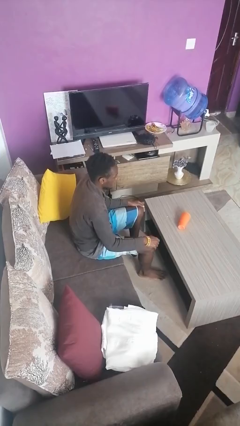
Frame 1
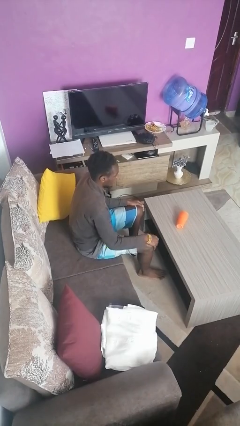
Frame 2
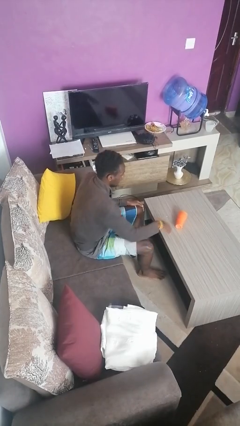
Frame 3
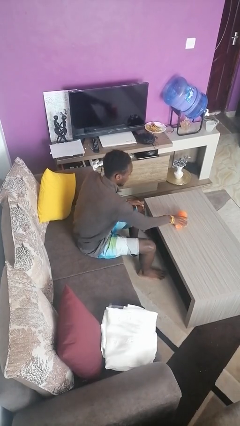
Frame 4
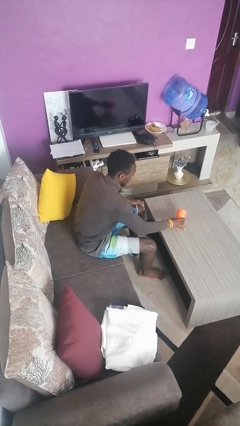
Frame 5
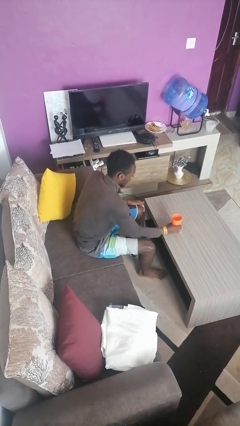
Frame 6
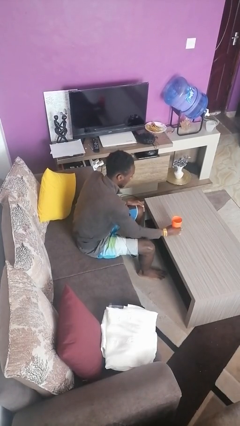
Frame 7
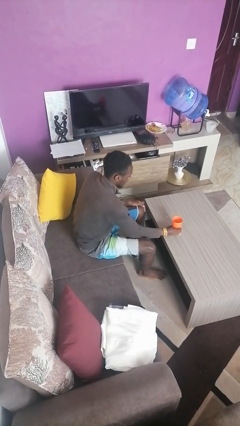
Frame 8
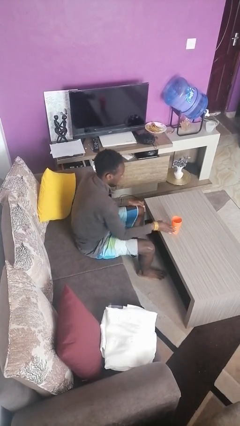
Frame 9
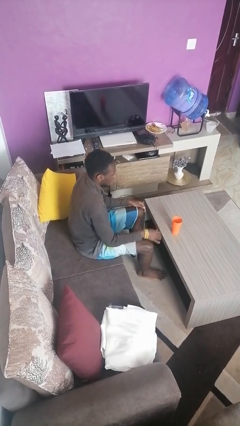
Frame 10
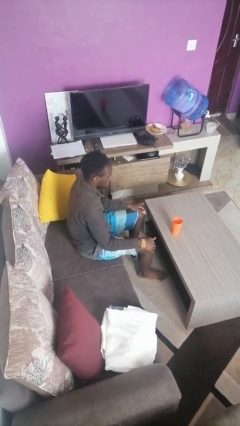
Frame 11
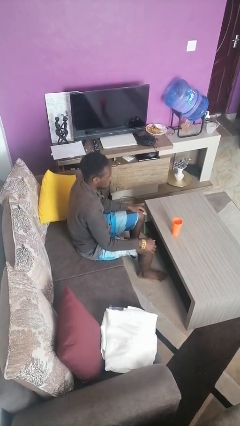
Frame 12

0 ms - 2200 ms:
person sets upright glass

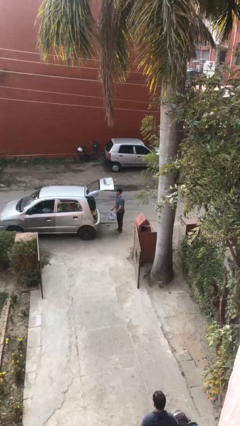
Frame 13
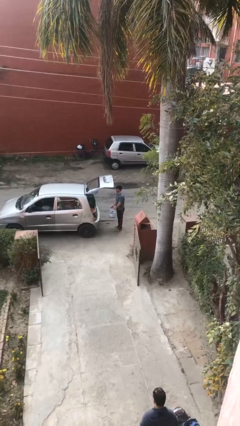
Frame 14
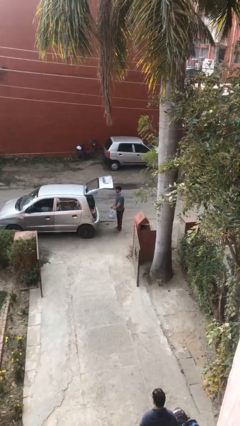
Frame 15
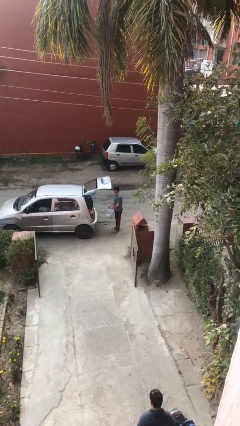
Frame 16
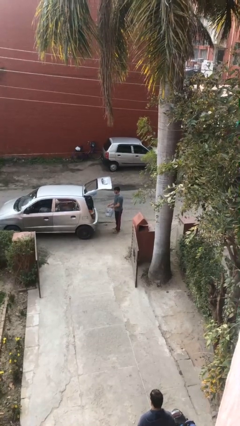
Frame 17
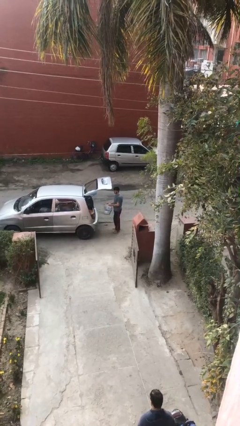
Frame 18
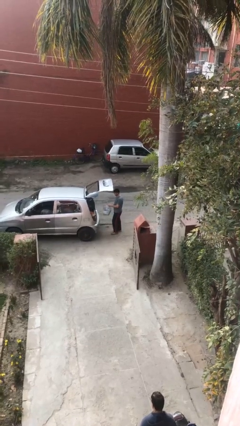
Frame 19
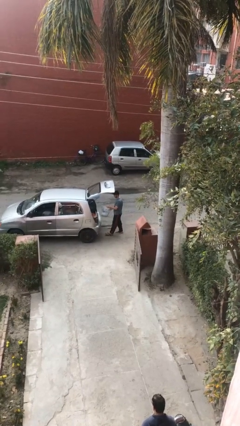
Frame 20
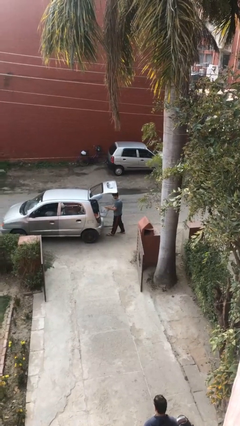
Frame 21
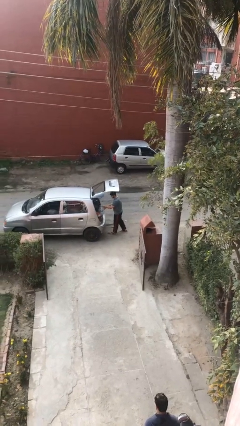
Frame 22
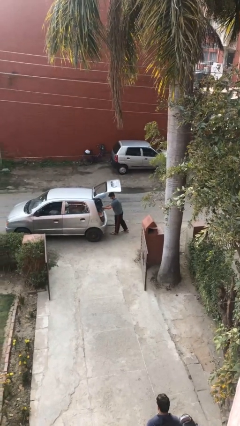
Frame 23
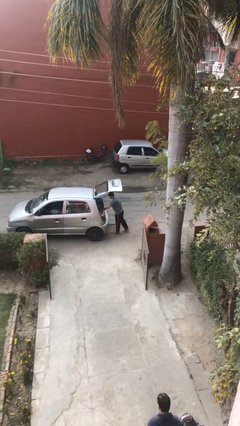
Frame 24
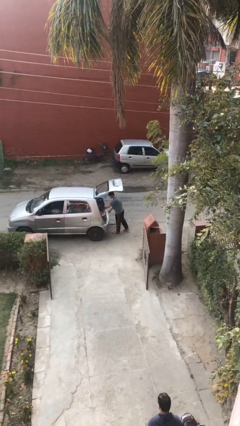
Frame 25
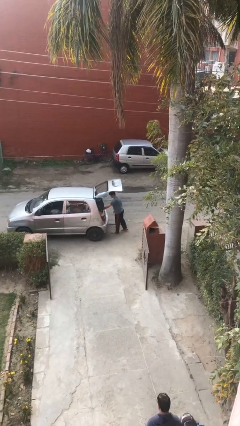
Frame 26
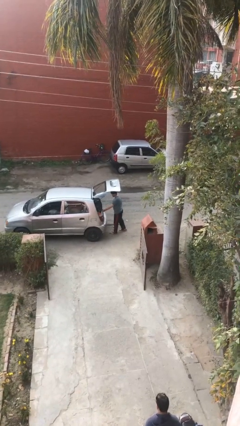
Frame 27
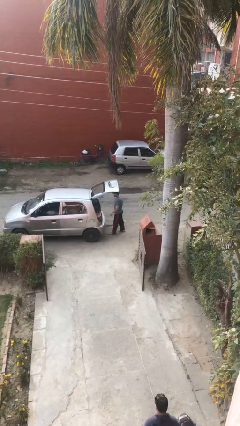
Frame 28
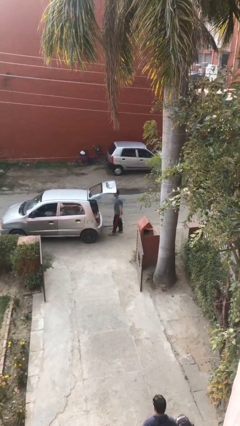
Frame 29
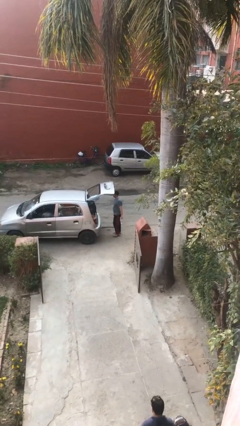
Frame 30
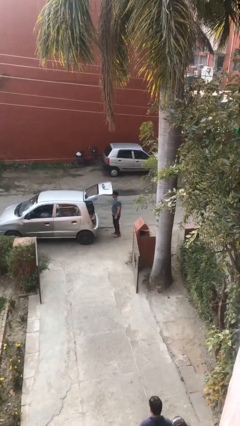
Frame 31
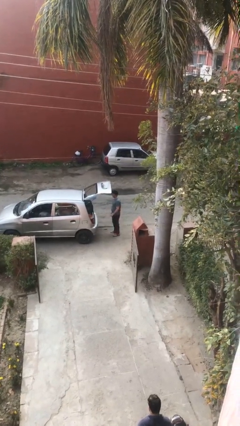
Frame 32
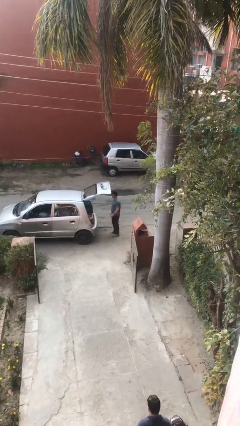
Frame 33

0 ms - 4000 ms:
person loads car

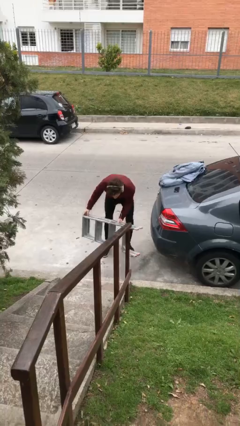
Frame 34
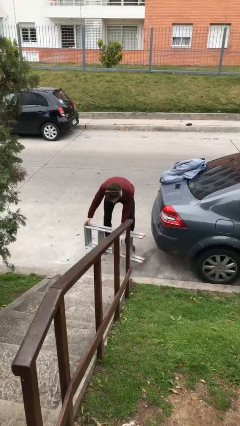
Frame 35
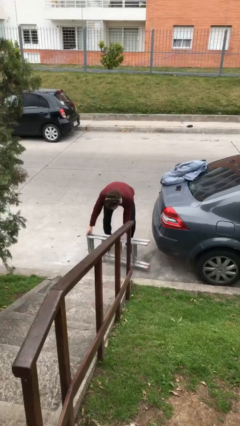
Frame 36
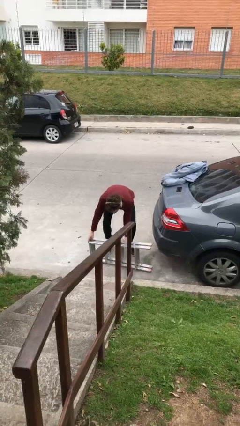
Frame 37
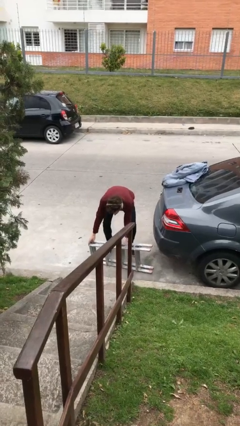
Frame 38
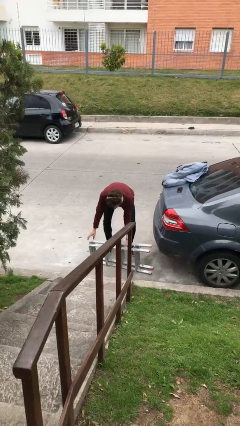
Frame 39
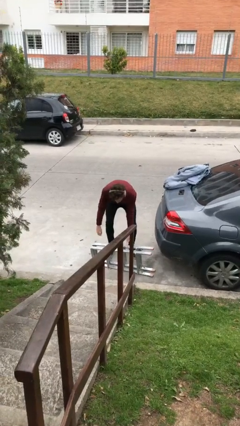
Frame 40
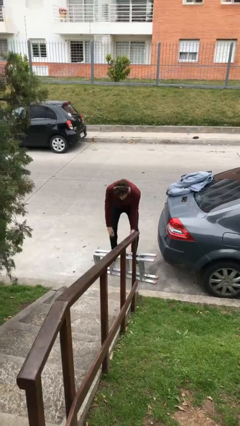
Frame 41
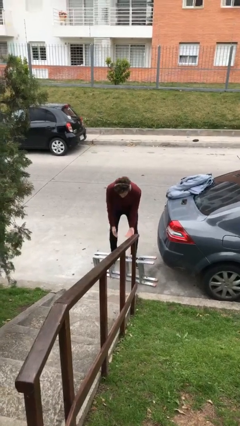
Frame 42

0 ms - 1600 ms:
person puts down object on floor

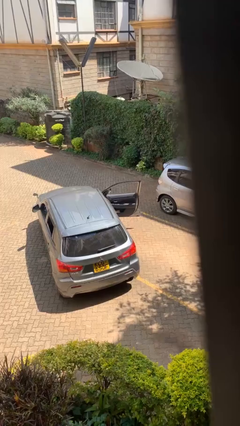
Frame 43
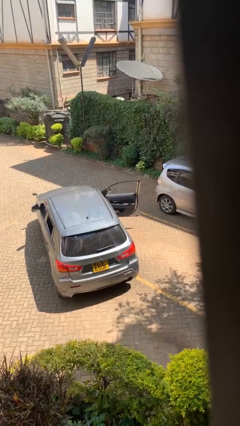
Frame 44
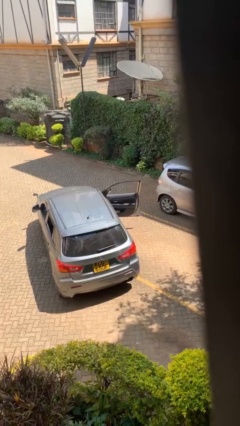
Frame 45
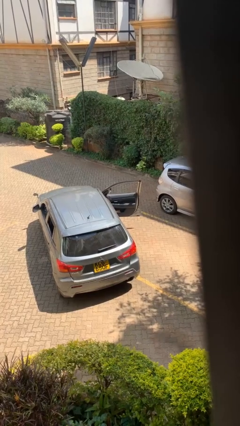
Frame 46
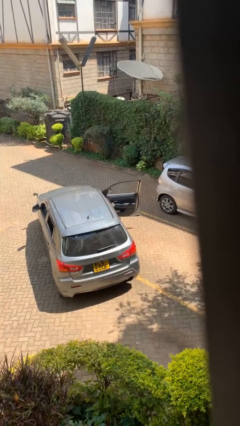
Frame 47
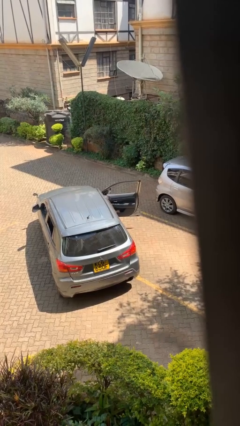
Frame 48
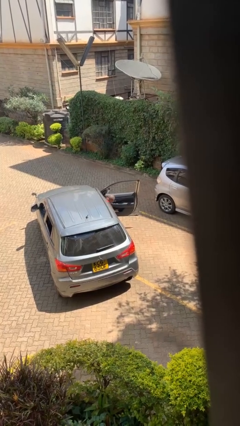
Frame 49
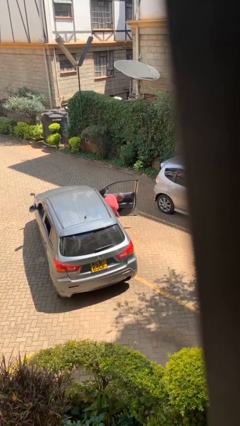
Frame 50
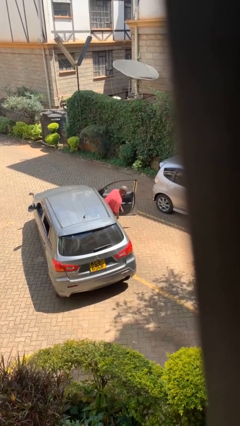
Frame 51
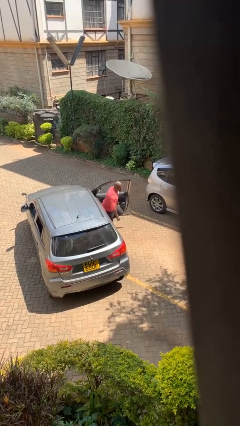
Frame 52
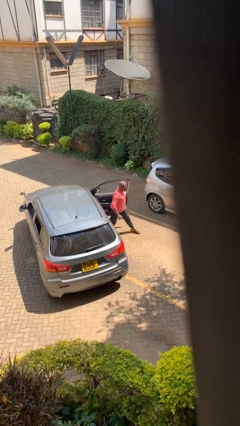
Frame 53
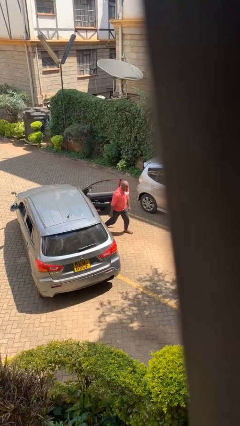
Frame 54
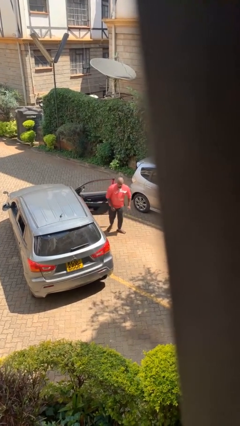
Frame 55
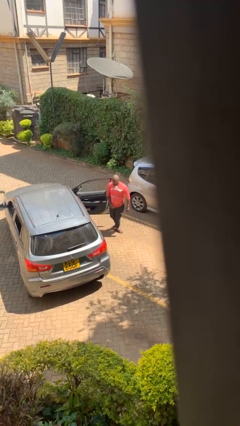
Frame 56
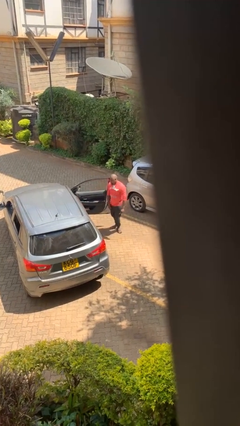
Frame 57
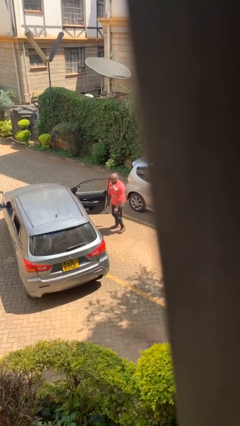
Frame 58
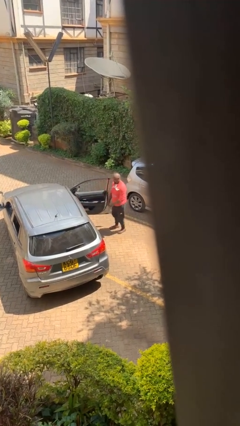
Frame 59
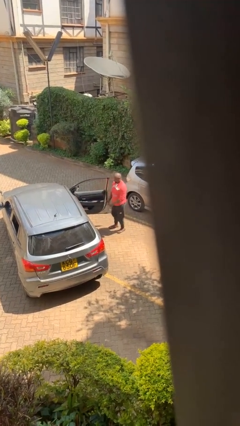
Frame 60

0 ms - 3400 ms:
person exits car

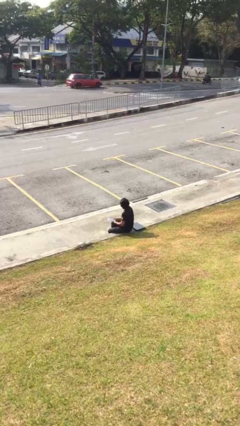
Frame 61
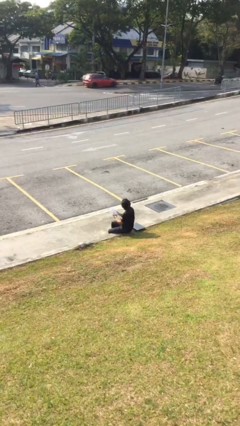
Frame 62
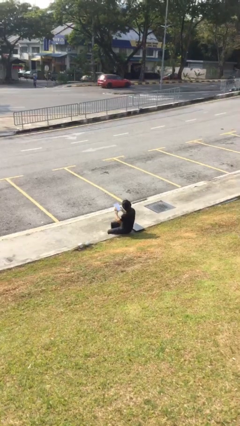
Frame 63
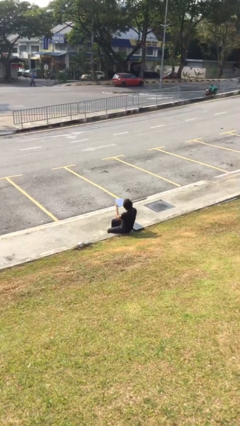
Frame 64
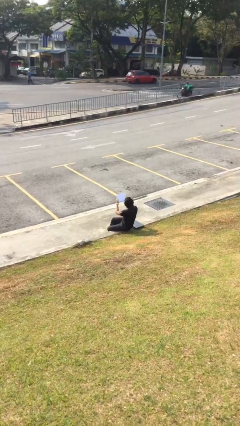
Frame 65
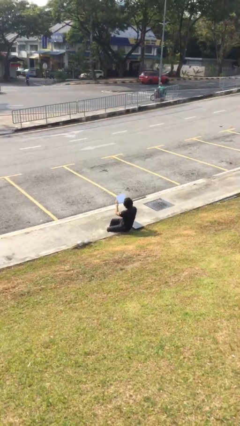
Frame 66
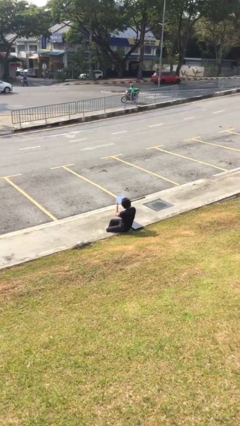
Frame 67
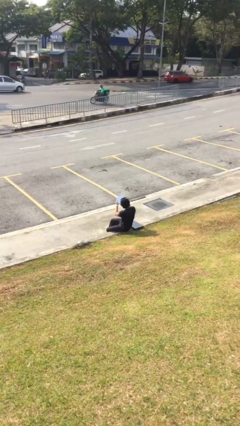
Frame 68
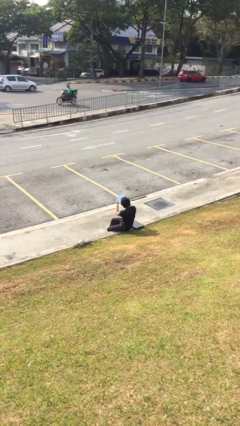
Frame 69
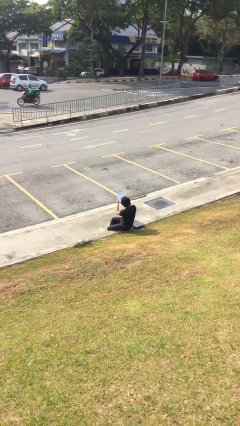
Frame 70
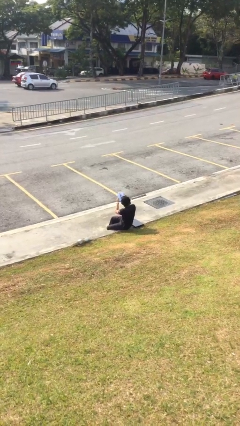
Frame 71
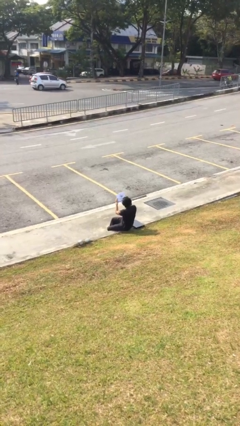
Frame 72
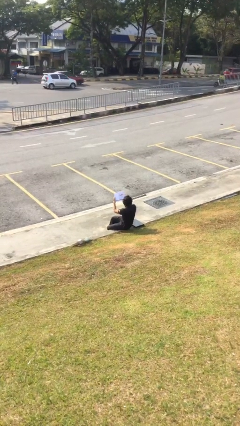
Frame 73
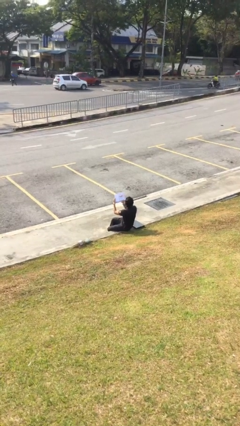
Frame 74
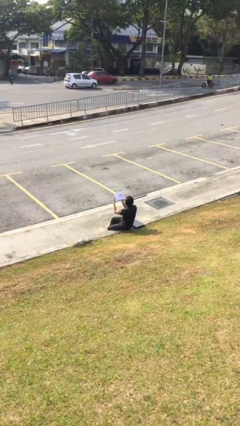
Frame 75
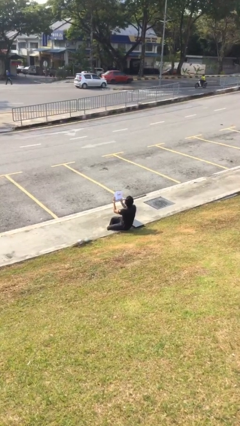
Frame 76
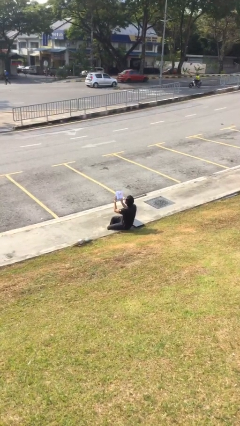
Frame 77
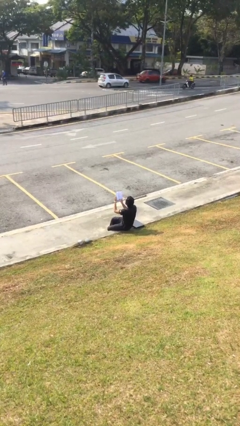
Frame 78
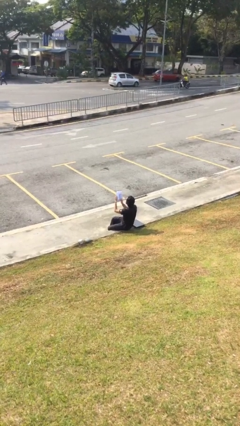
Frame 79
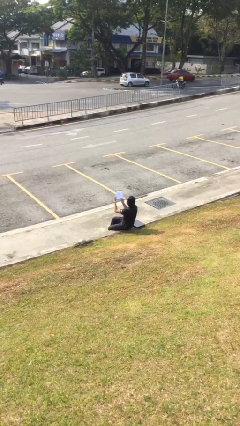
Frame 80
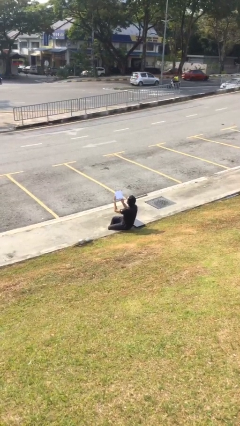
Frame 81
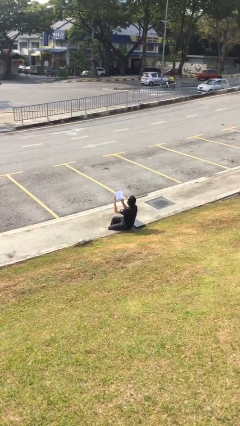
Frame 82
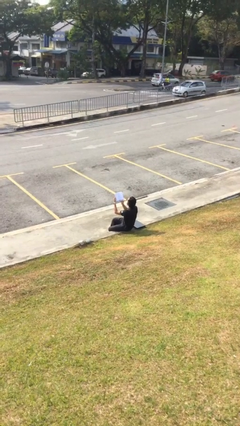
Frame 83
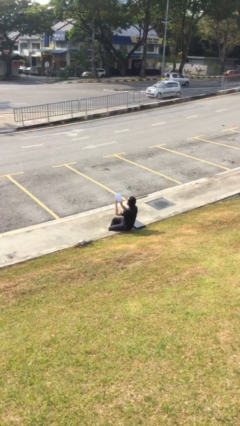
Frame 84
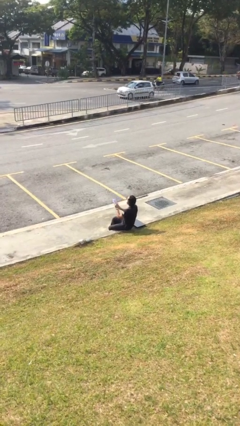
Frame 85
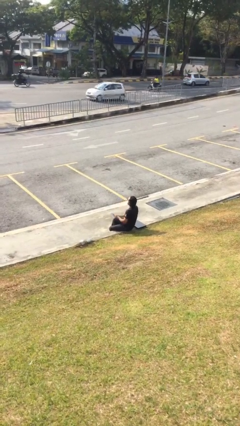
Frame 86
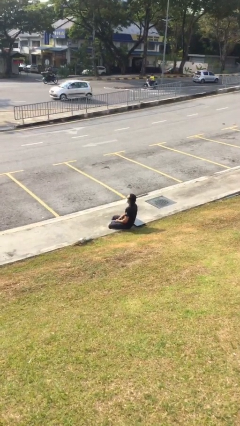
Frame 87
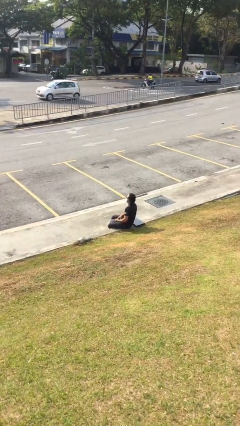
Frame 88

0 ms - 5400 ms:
person reads document

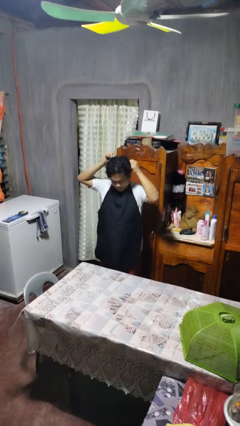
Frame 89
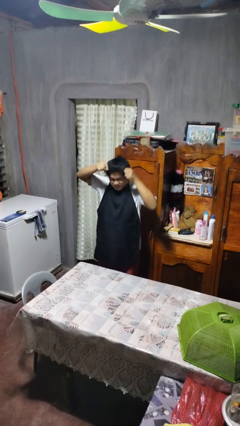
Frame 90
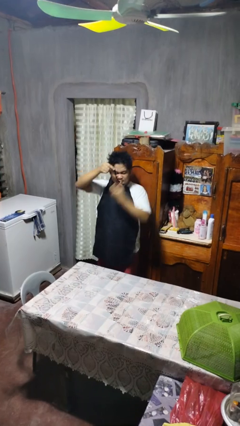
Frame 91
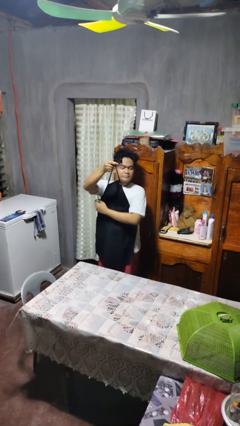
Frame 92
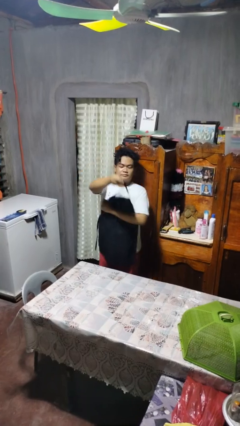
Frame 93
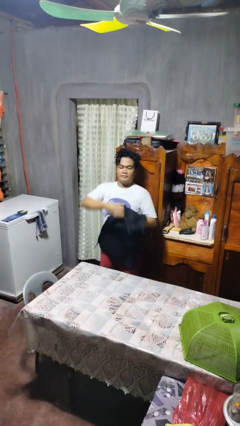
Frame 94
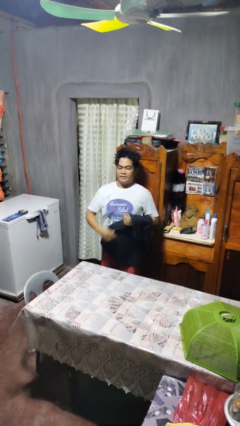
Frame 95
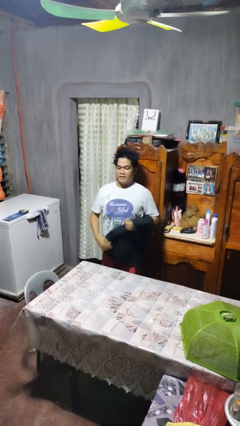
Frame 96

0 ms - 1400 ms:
person takes off apron
